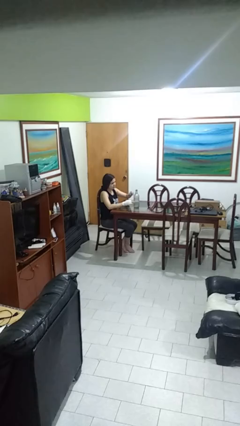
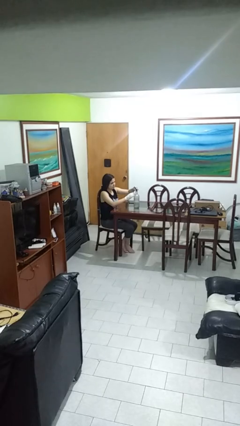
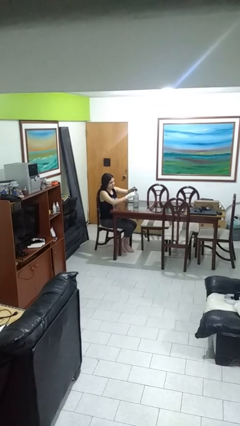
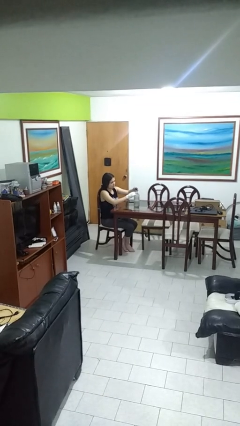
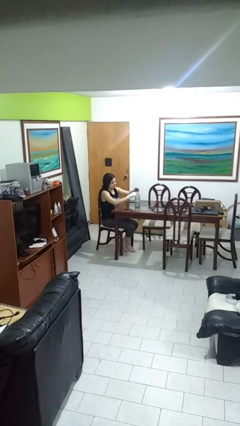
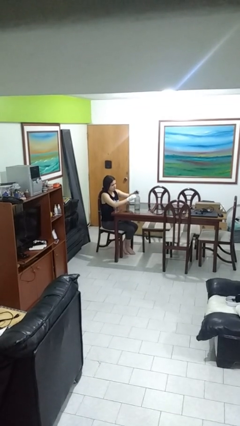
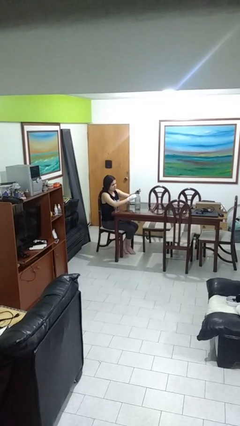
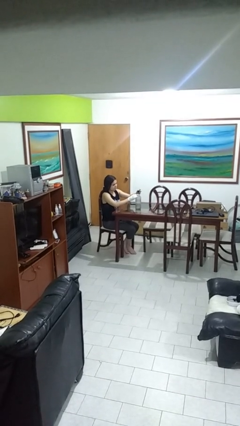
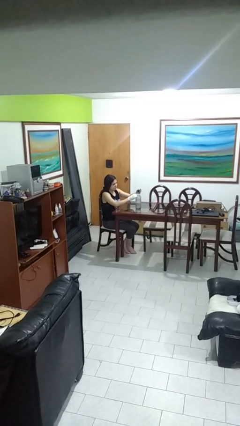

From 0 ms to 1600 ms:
person screws lid to bottle

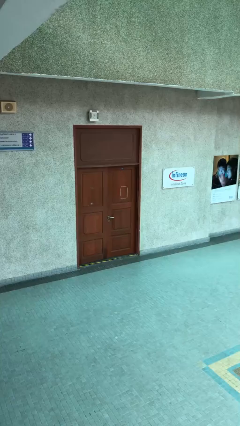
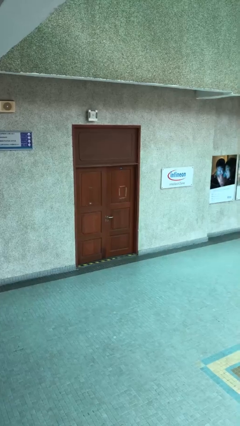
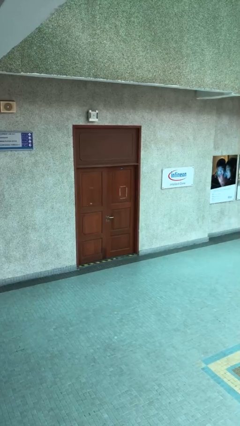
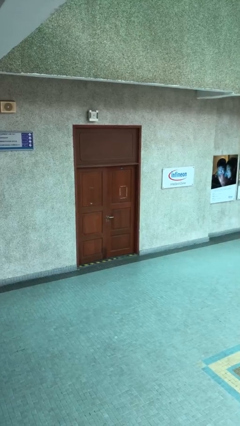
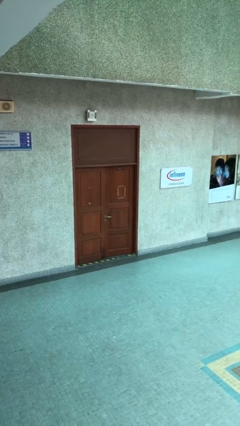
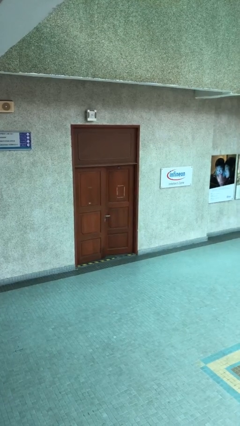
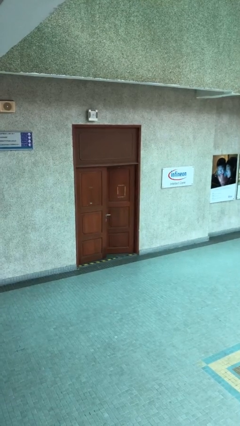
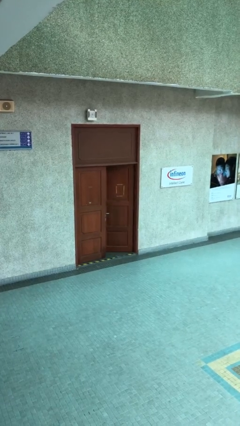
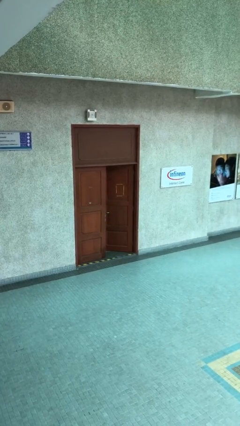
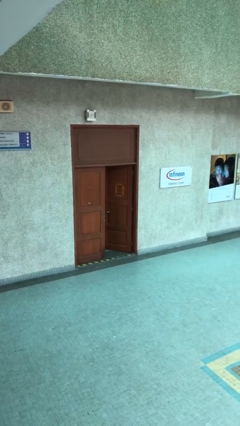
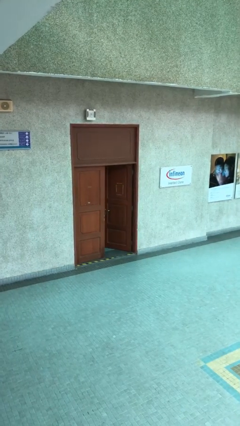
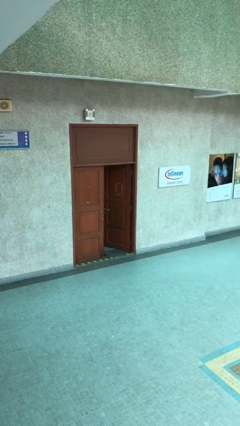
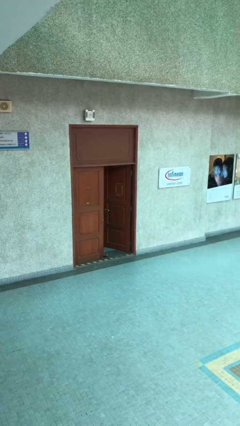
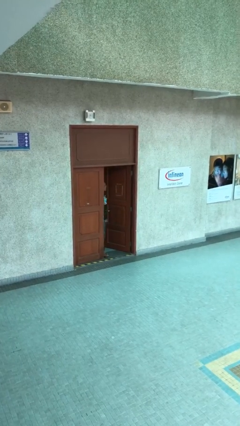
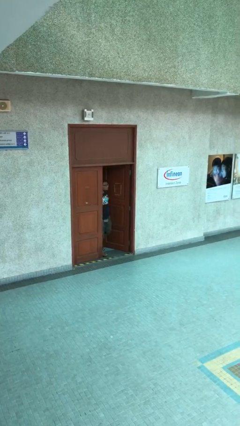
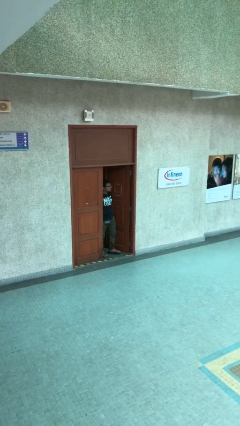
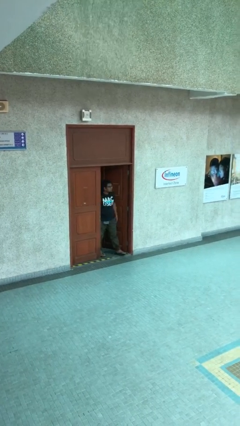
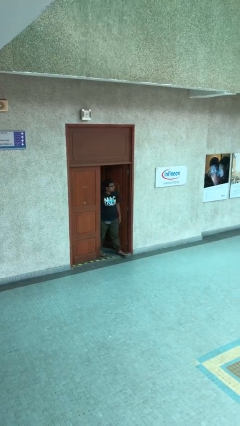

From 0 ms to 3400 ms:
person opens facility door

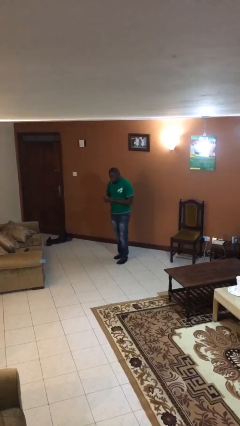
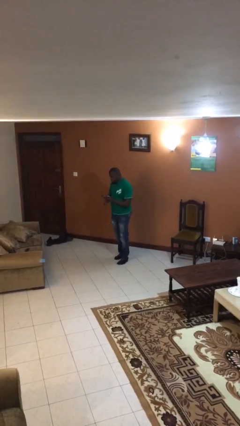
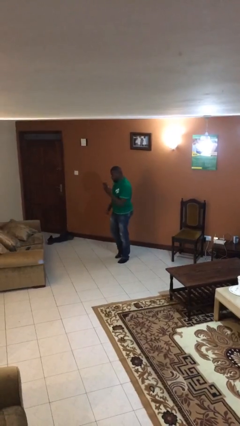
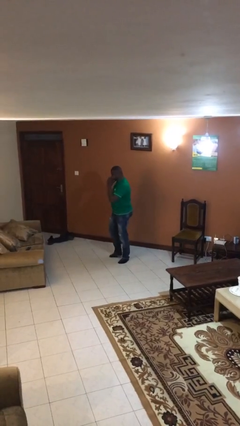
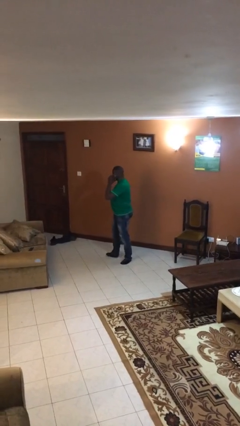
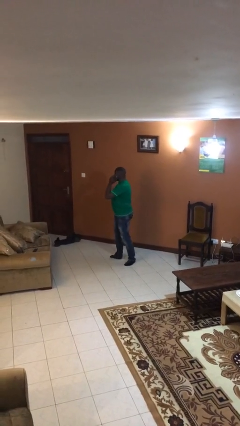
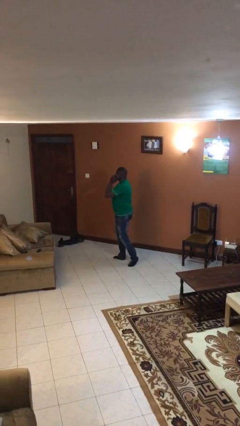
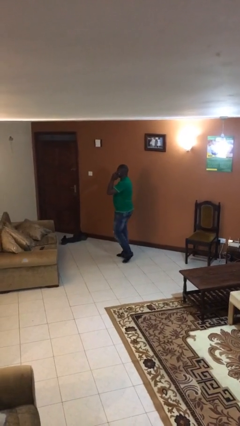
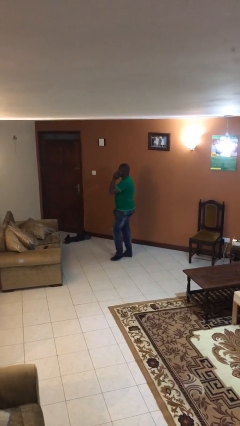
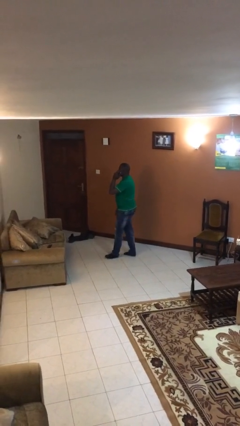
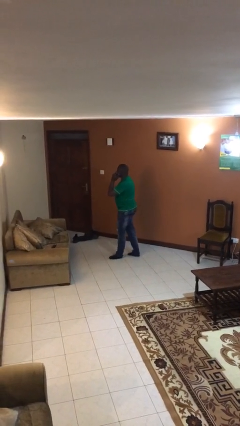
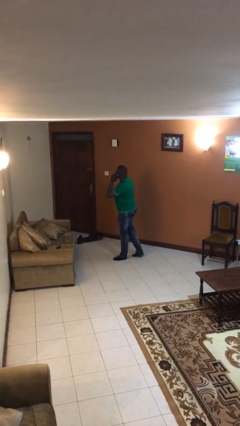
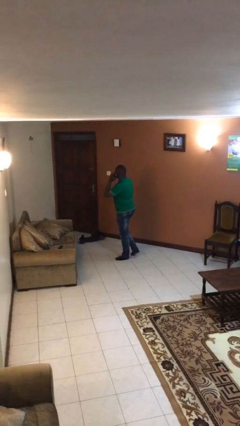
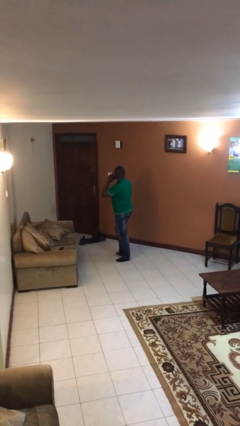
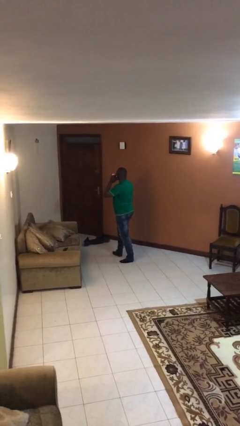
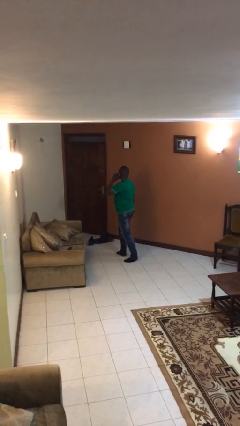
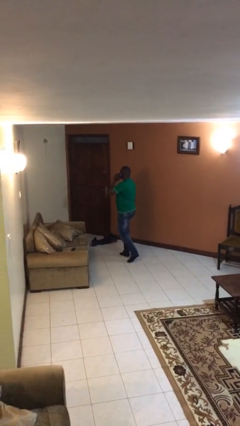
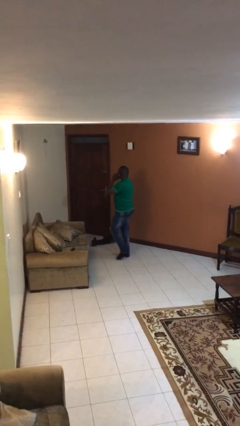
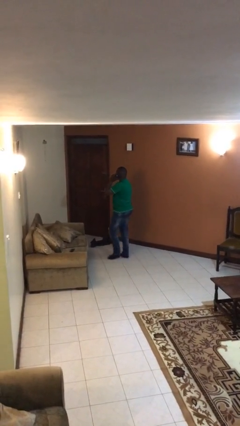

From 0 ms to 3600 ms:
person talks on phone

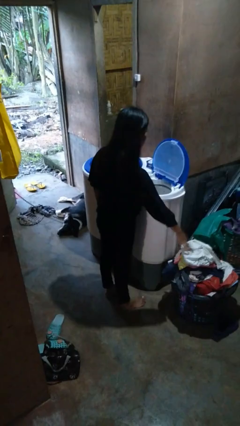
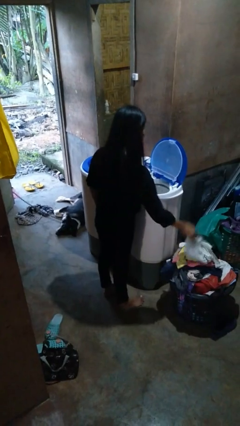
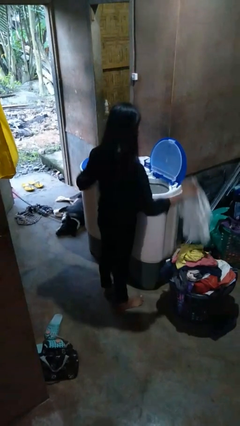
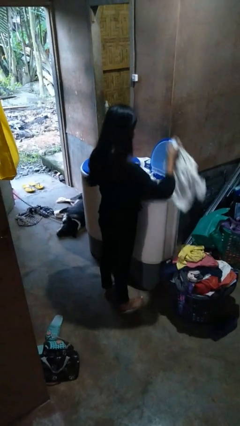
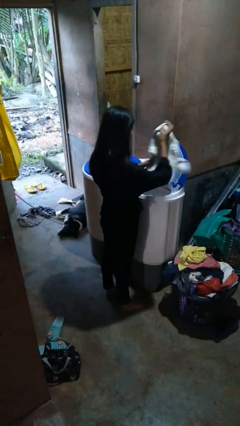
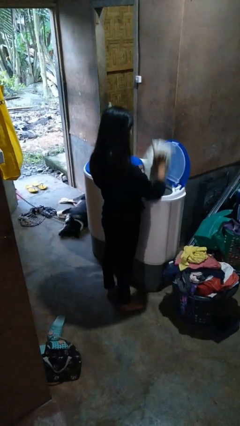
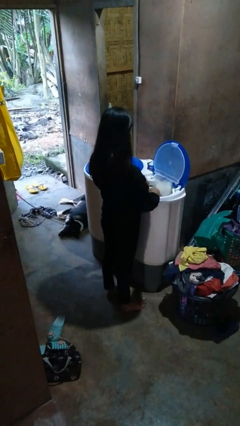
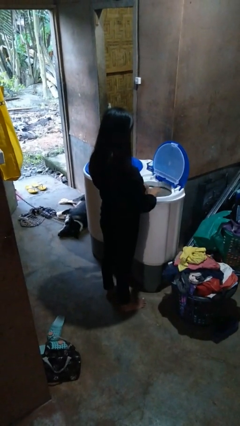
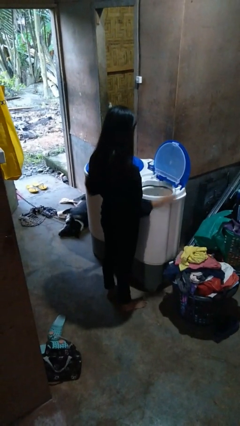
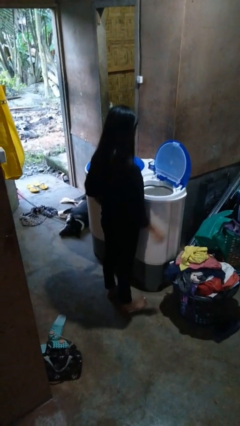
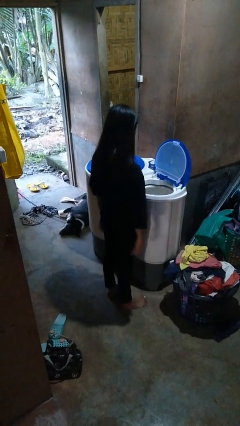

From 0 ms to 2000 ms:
person loads dryer

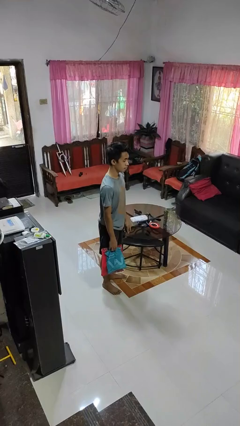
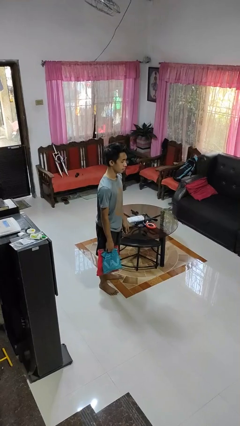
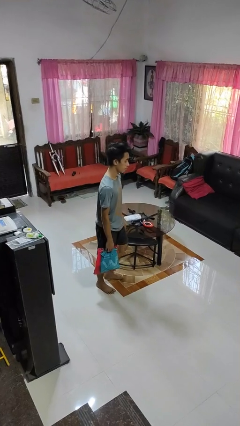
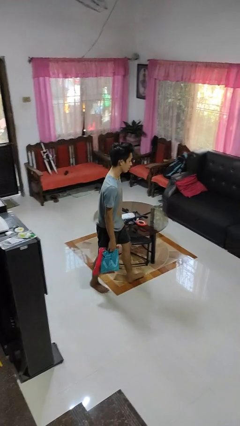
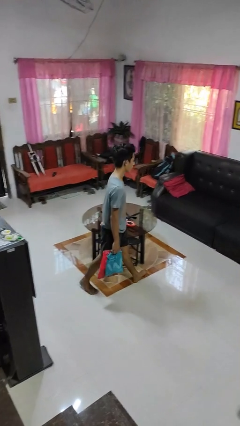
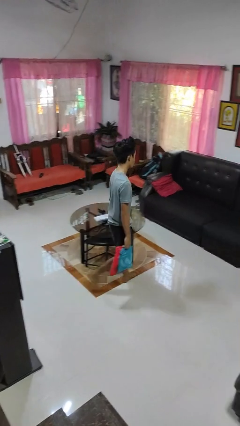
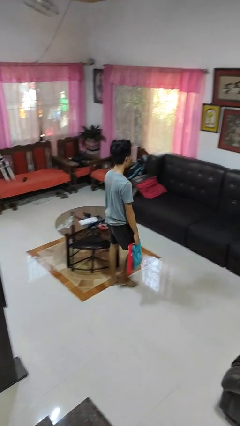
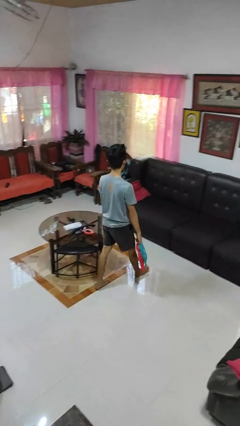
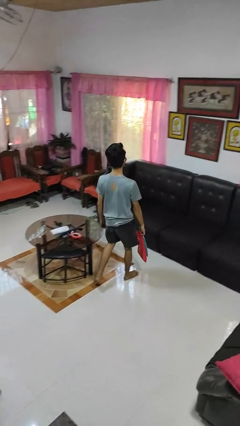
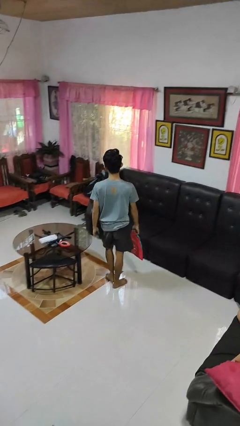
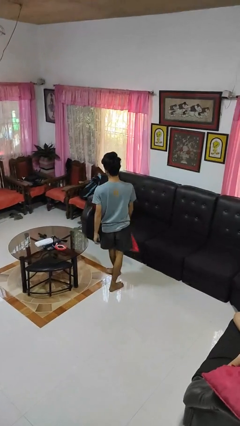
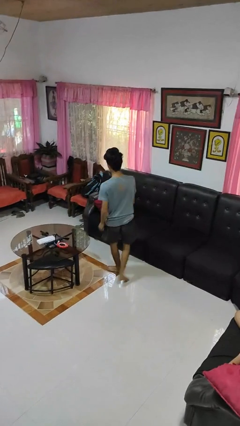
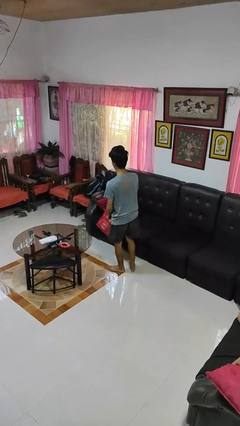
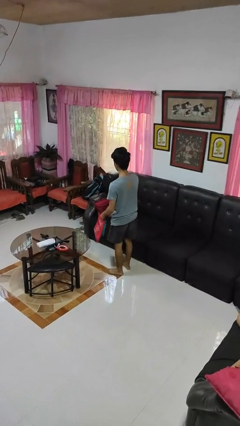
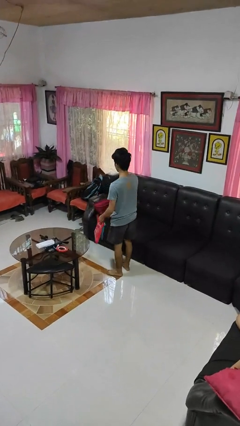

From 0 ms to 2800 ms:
person carries groceries

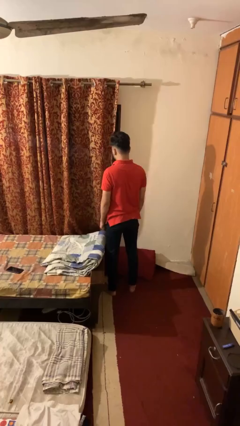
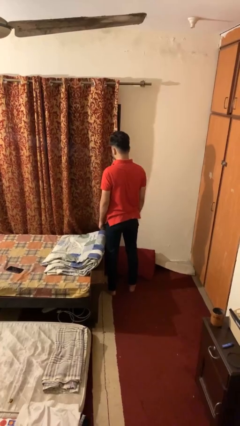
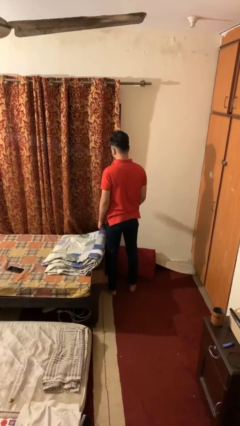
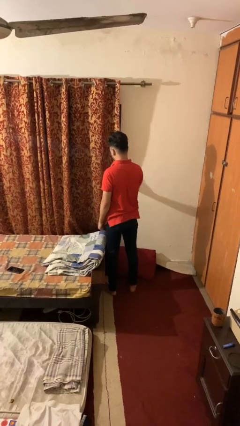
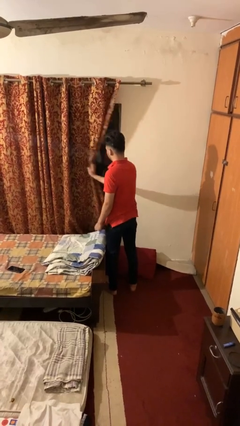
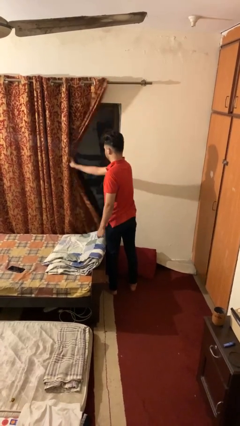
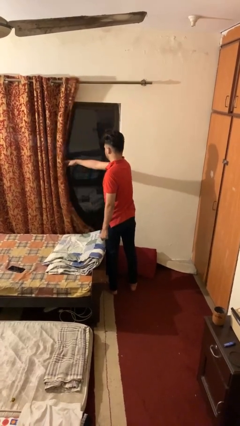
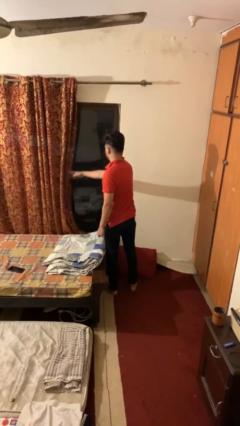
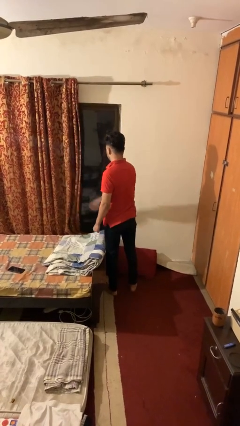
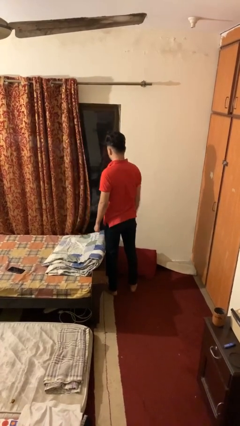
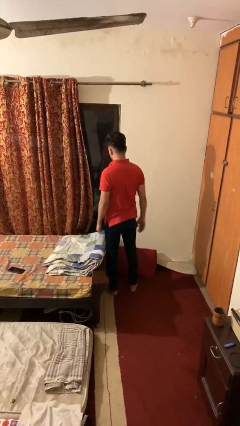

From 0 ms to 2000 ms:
person opens curtains

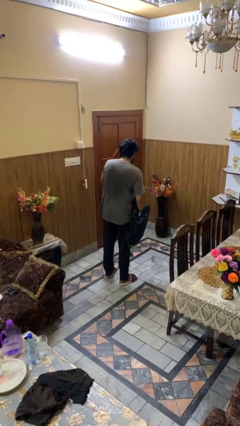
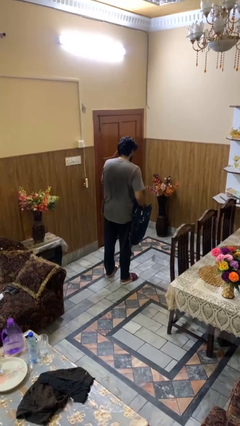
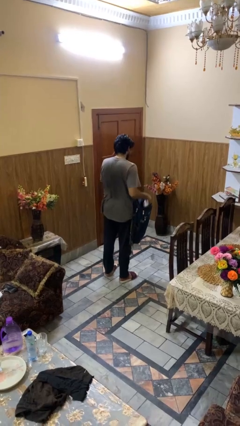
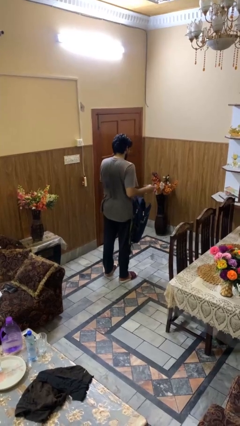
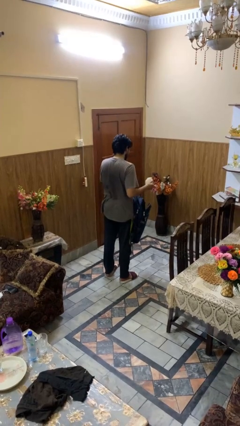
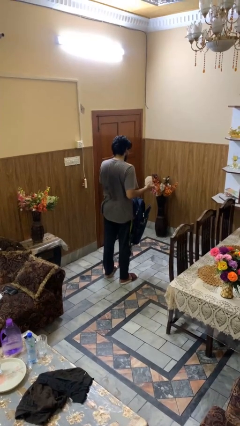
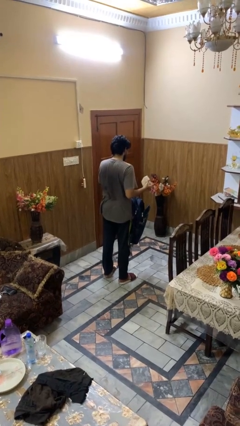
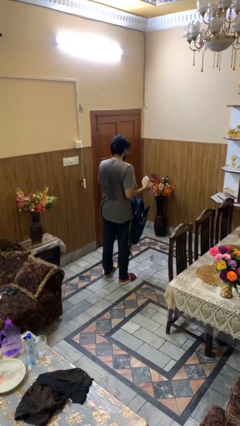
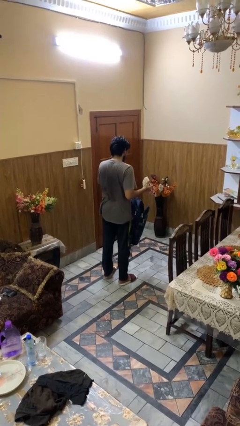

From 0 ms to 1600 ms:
person takes object from backpack

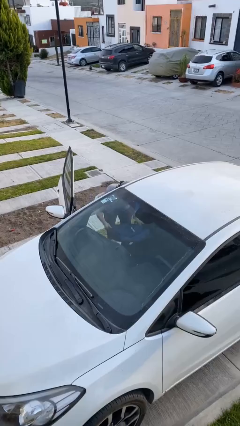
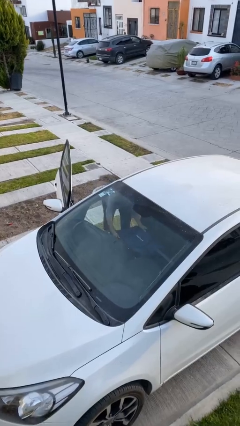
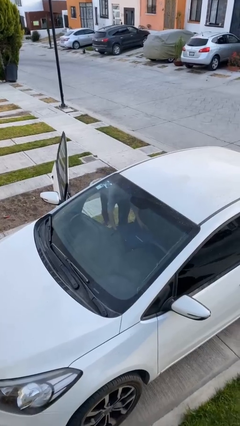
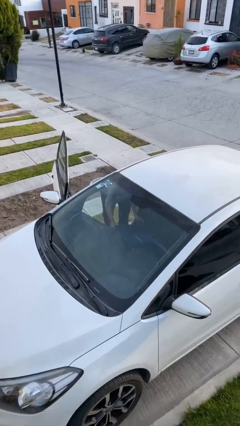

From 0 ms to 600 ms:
person loads car
